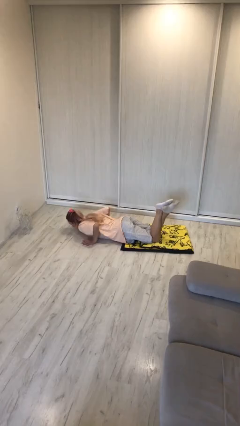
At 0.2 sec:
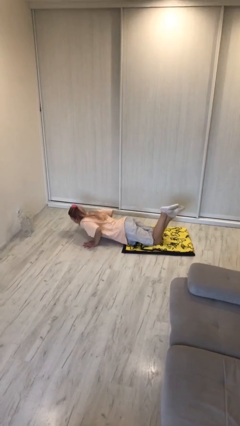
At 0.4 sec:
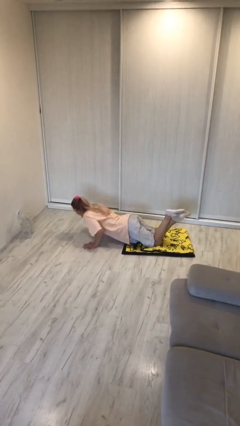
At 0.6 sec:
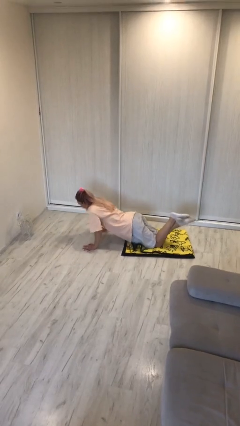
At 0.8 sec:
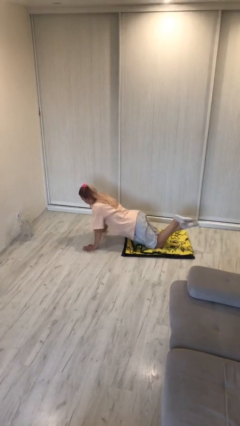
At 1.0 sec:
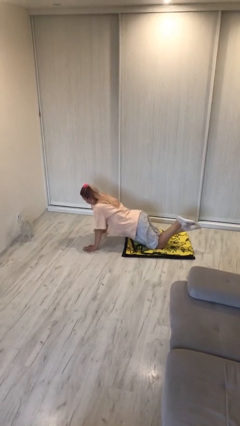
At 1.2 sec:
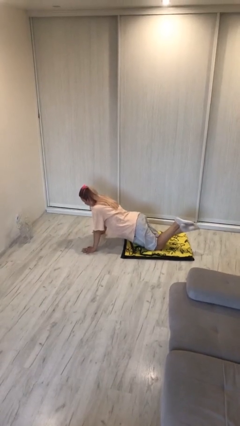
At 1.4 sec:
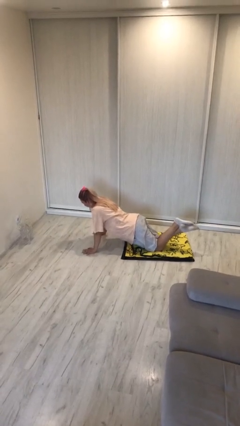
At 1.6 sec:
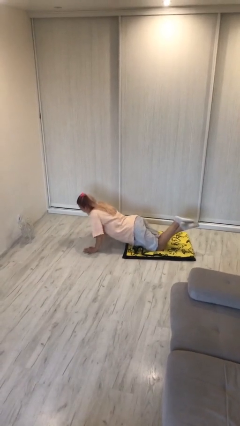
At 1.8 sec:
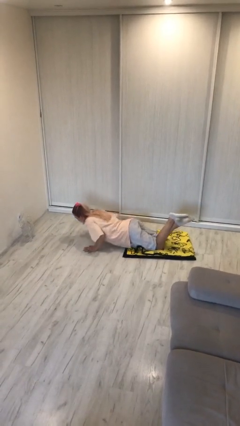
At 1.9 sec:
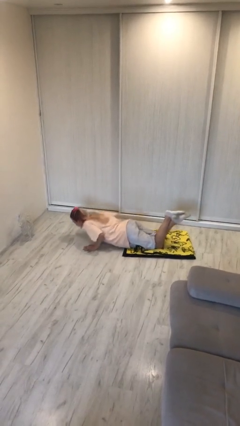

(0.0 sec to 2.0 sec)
person exercises with pushup

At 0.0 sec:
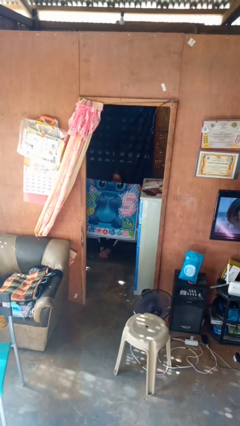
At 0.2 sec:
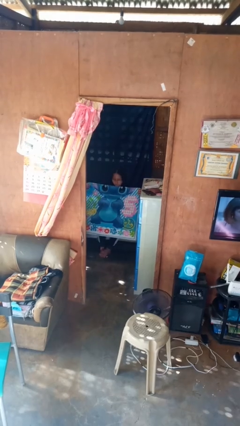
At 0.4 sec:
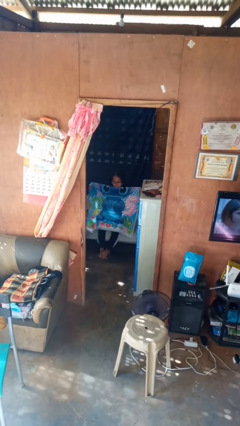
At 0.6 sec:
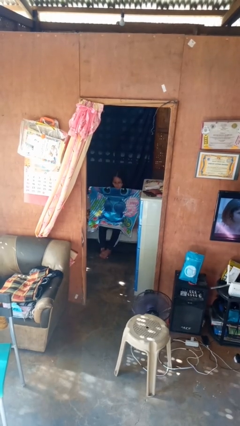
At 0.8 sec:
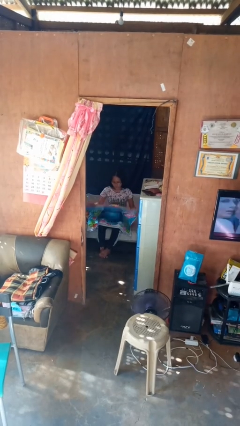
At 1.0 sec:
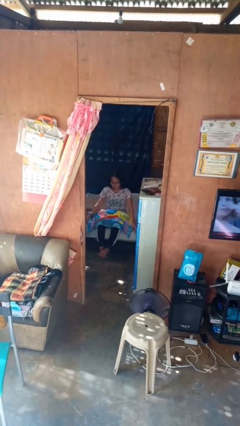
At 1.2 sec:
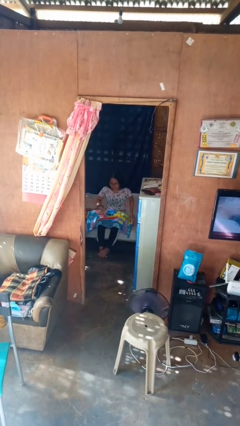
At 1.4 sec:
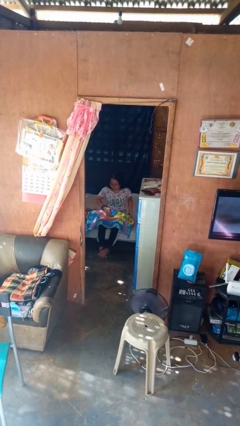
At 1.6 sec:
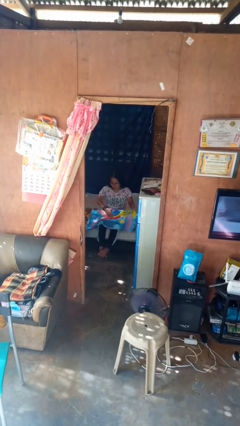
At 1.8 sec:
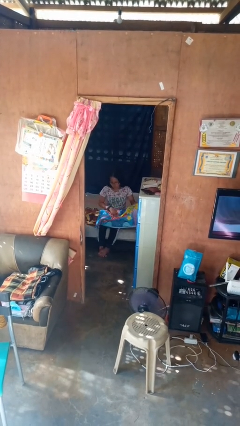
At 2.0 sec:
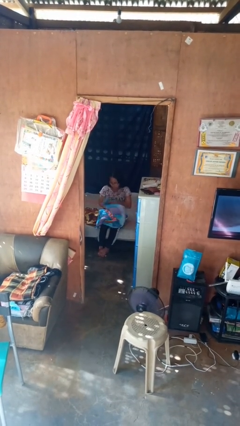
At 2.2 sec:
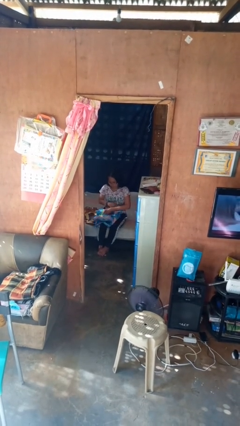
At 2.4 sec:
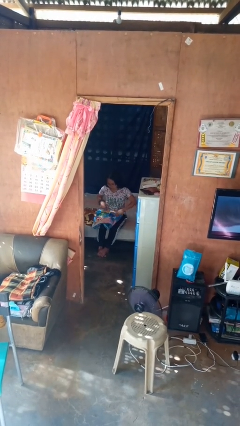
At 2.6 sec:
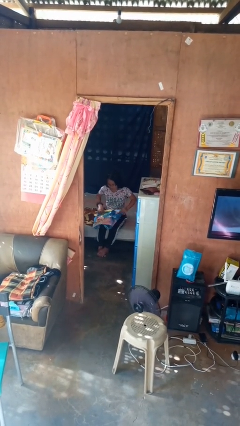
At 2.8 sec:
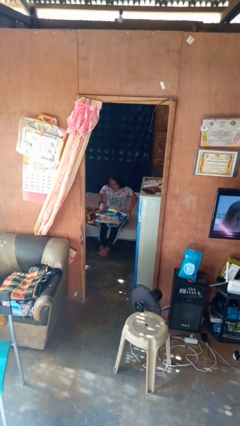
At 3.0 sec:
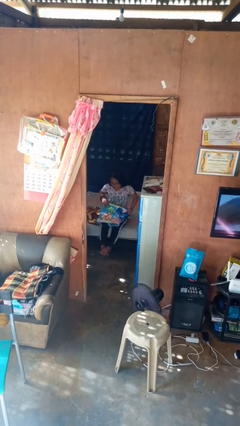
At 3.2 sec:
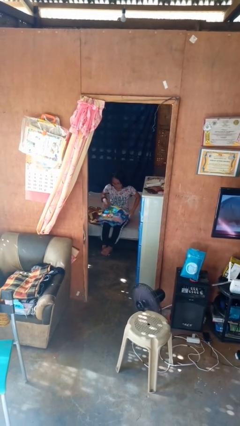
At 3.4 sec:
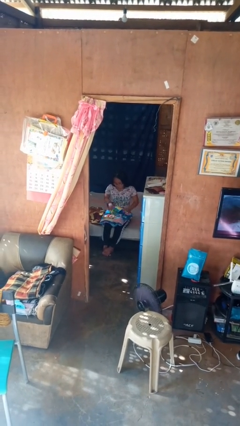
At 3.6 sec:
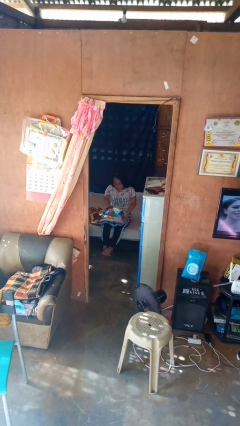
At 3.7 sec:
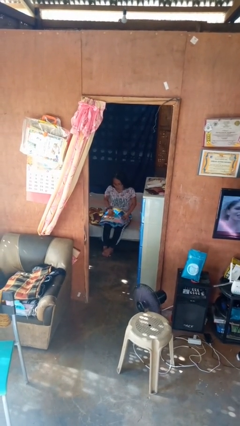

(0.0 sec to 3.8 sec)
person folds blanket

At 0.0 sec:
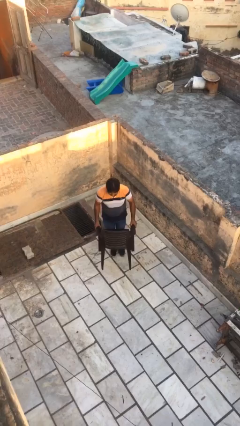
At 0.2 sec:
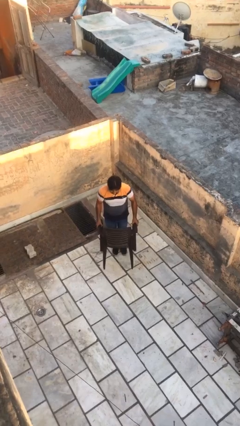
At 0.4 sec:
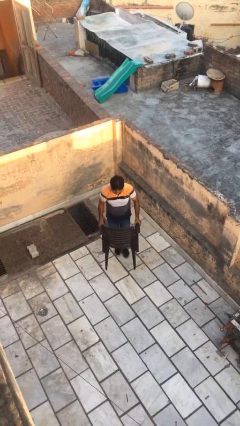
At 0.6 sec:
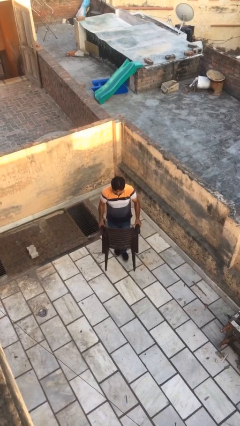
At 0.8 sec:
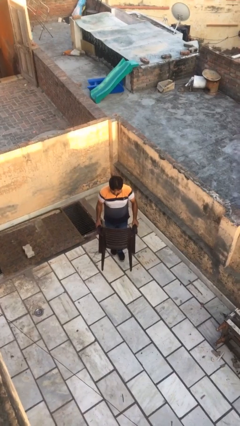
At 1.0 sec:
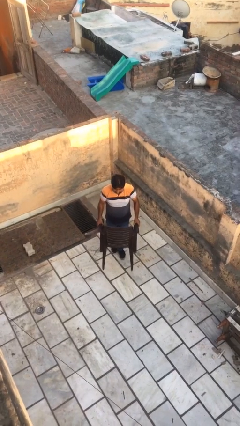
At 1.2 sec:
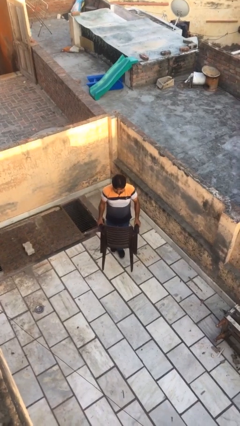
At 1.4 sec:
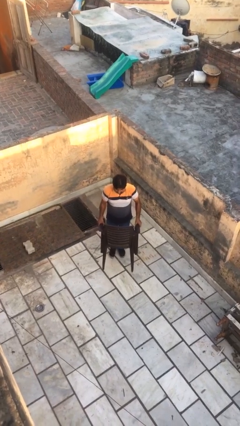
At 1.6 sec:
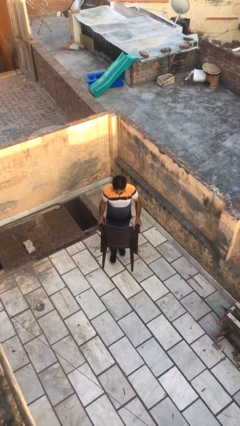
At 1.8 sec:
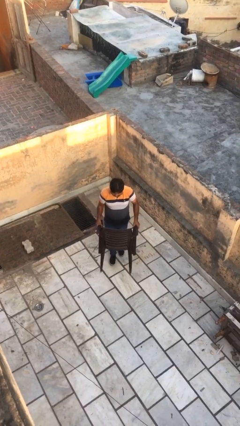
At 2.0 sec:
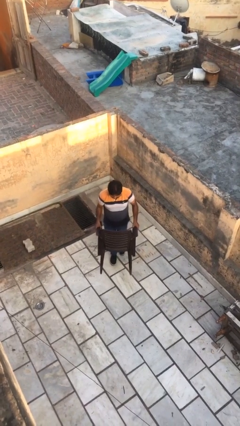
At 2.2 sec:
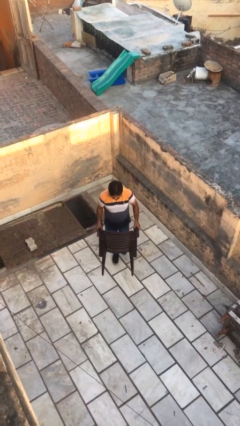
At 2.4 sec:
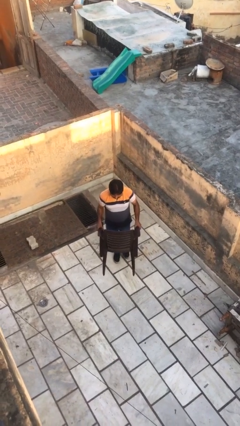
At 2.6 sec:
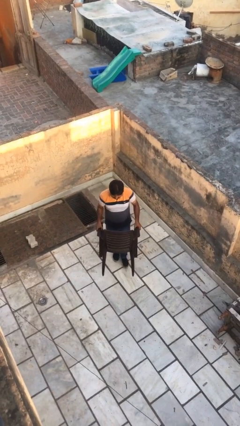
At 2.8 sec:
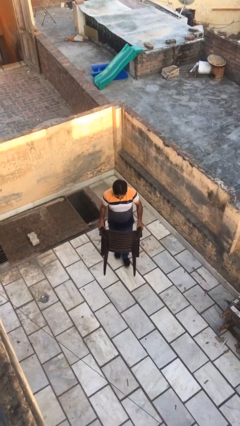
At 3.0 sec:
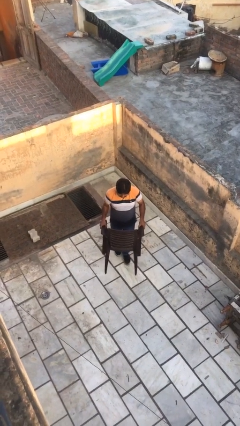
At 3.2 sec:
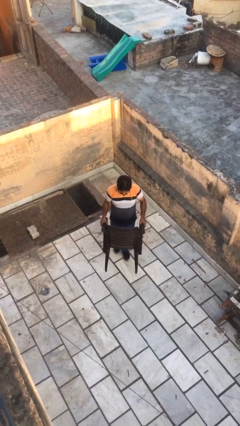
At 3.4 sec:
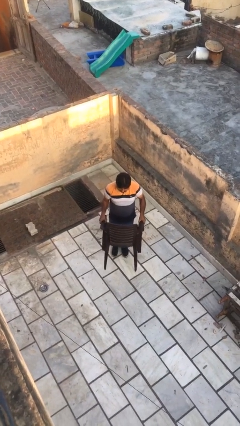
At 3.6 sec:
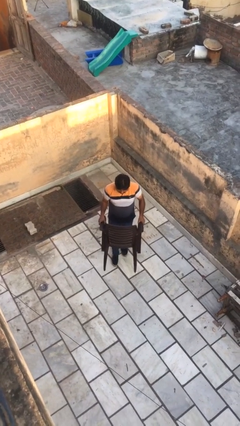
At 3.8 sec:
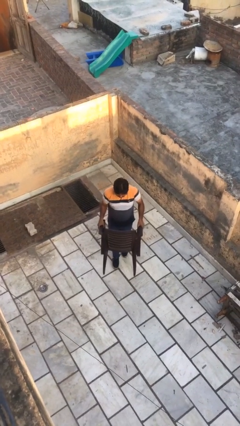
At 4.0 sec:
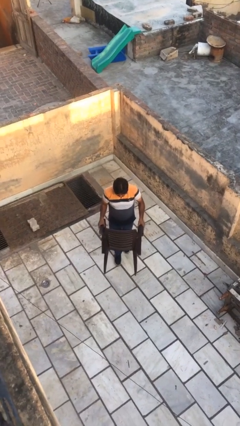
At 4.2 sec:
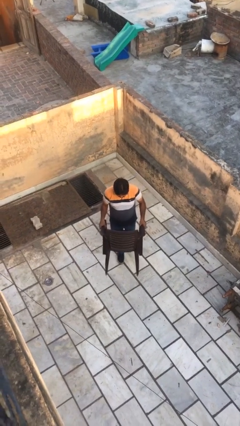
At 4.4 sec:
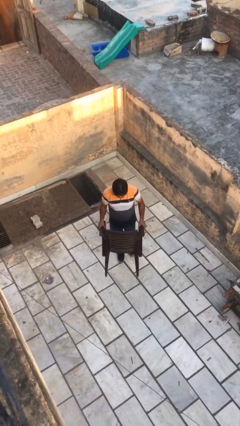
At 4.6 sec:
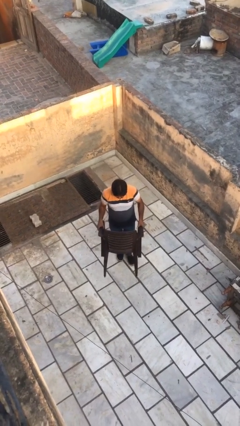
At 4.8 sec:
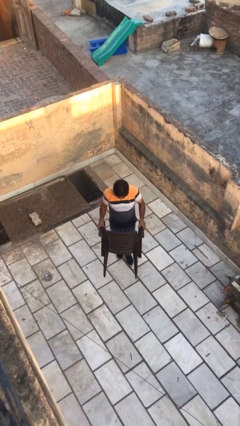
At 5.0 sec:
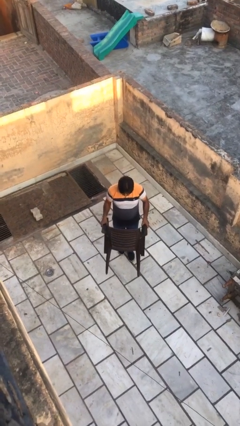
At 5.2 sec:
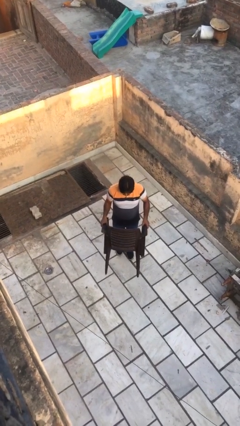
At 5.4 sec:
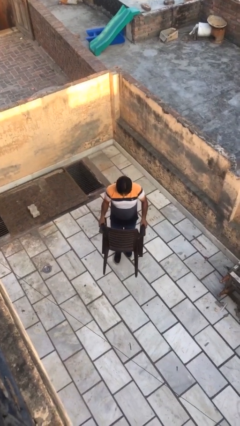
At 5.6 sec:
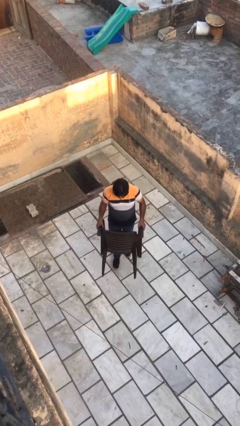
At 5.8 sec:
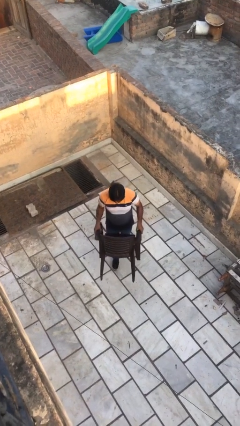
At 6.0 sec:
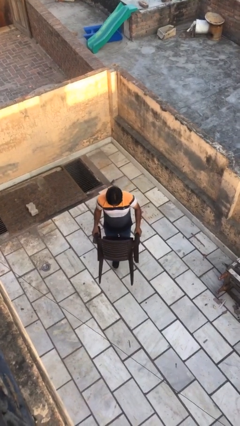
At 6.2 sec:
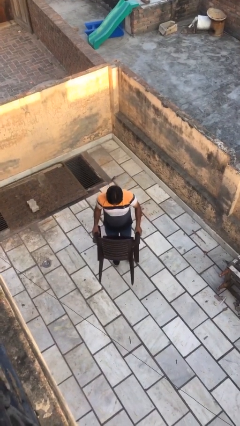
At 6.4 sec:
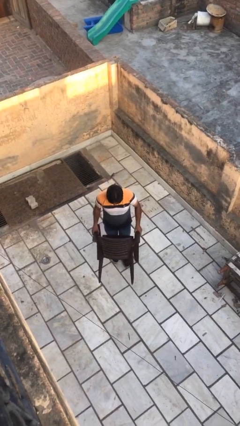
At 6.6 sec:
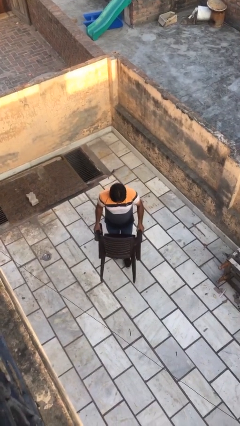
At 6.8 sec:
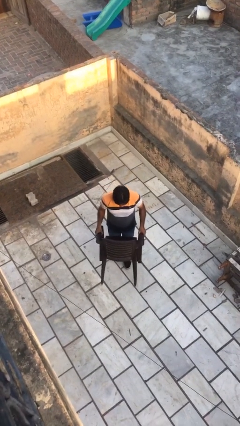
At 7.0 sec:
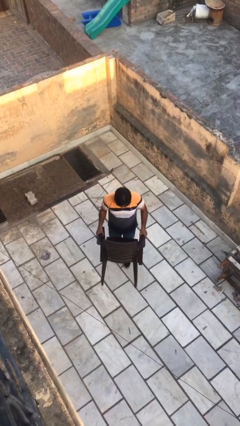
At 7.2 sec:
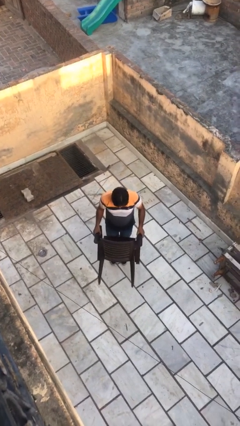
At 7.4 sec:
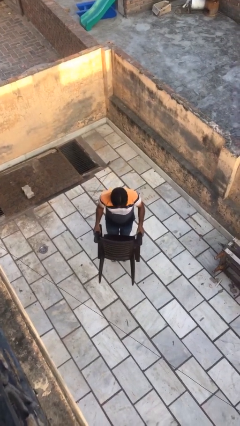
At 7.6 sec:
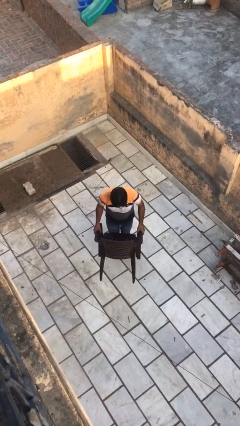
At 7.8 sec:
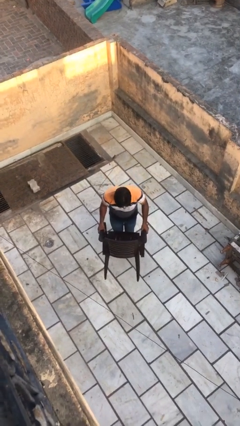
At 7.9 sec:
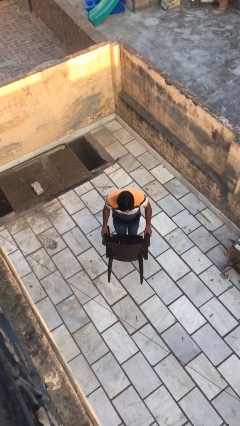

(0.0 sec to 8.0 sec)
person carries heavy object

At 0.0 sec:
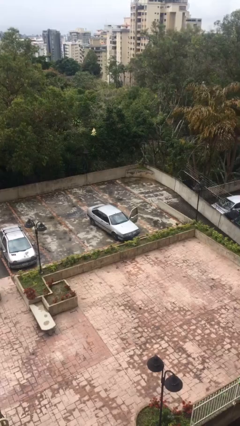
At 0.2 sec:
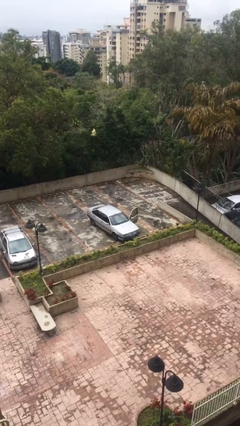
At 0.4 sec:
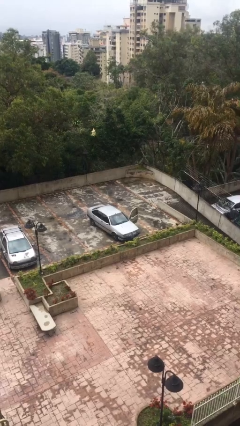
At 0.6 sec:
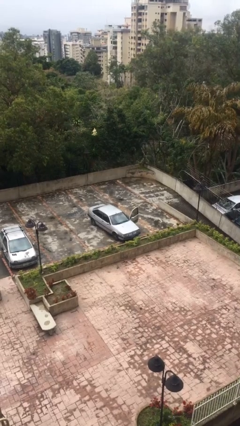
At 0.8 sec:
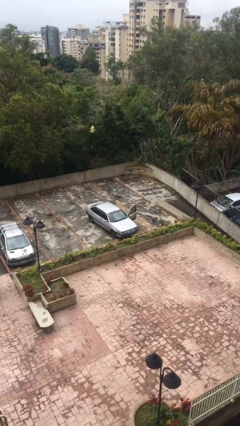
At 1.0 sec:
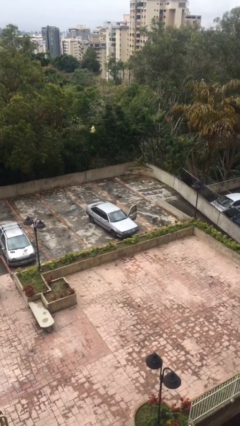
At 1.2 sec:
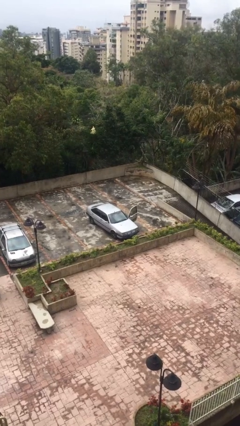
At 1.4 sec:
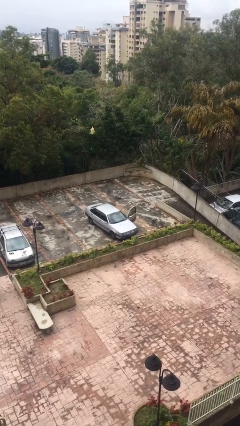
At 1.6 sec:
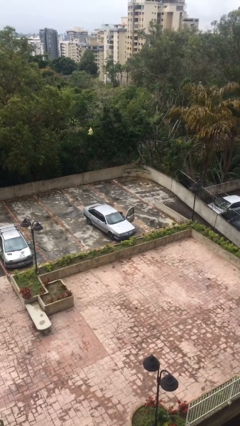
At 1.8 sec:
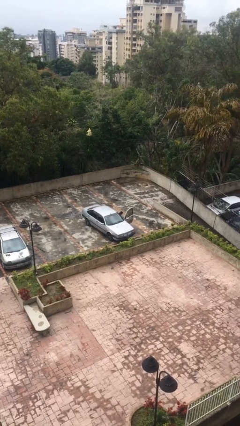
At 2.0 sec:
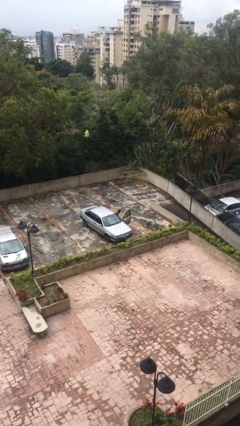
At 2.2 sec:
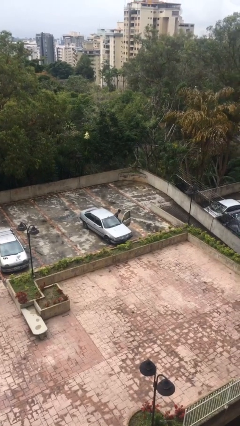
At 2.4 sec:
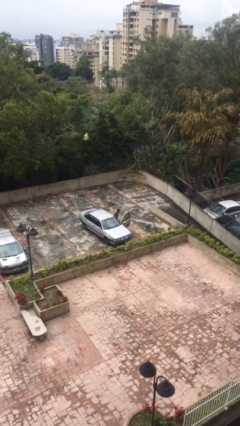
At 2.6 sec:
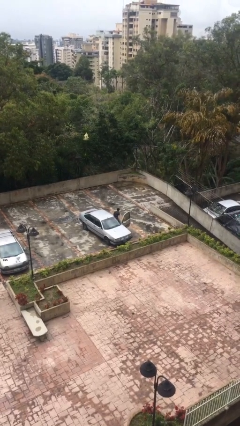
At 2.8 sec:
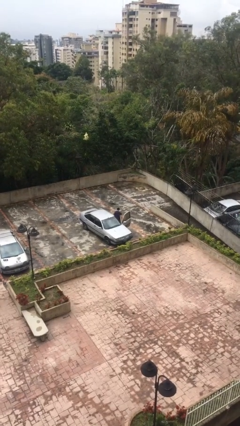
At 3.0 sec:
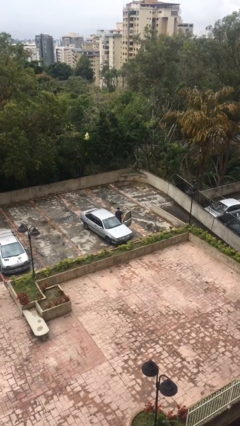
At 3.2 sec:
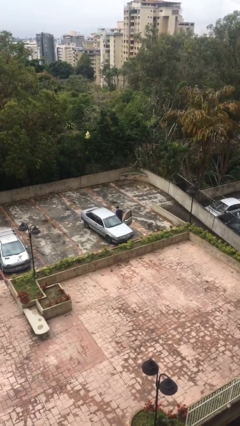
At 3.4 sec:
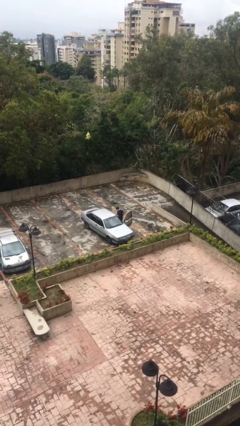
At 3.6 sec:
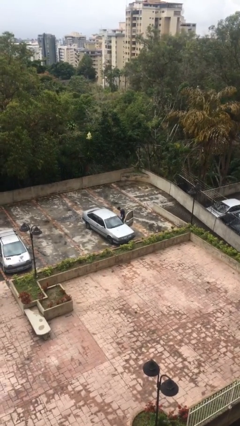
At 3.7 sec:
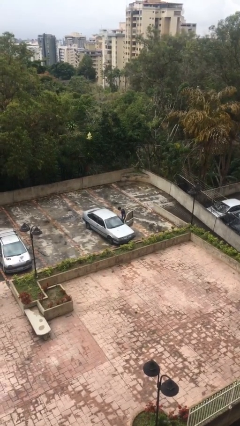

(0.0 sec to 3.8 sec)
person exits car
